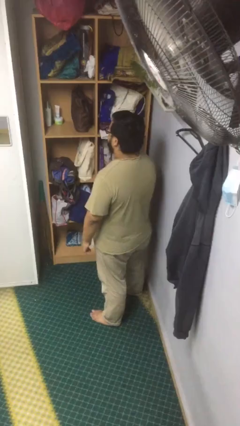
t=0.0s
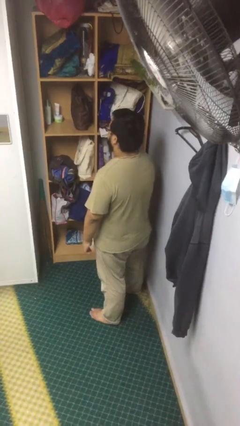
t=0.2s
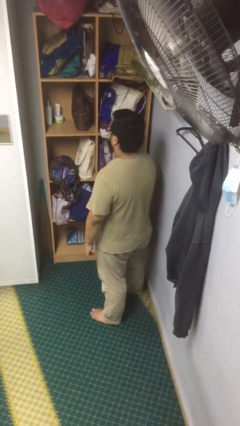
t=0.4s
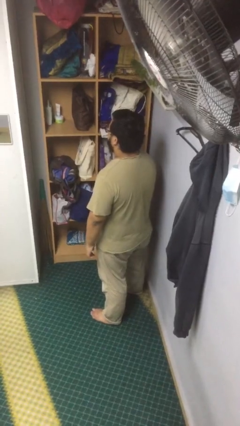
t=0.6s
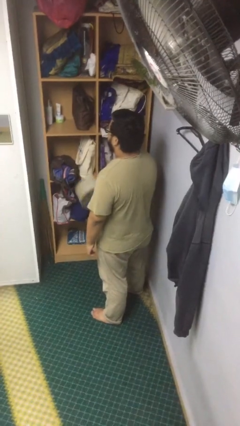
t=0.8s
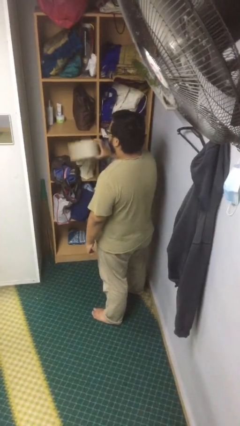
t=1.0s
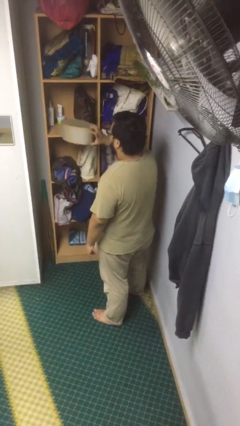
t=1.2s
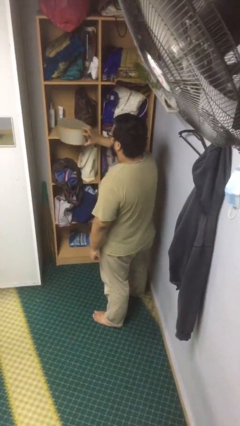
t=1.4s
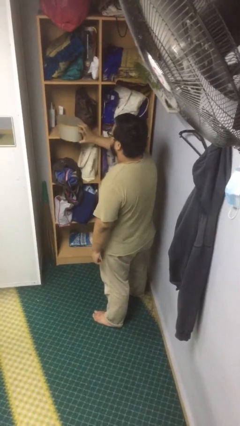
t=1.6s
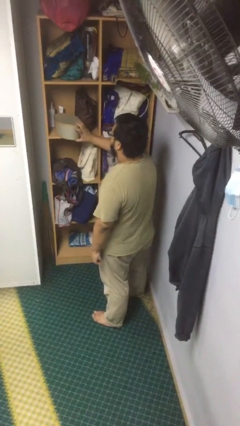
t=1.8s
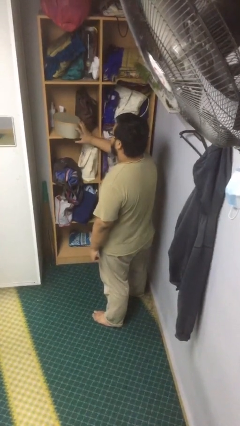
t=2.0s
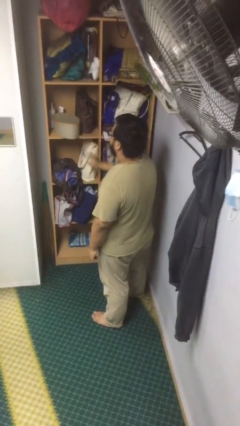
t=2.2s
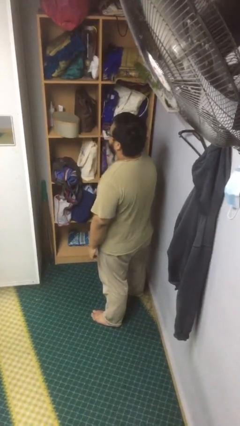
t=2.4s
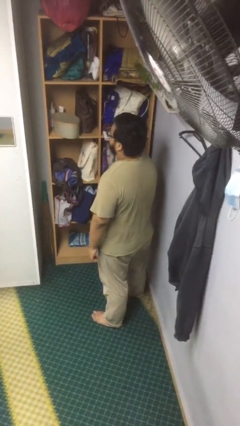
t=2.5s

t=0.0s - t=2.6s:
person puts down object into cabinet

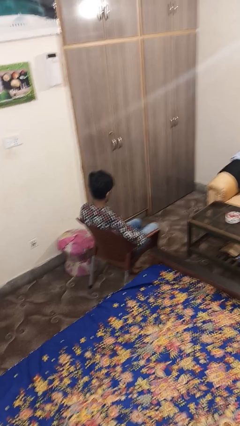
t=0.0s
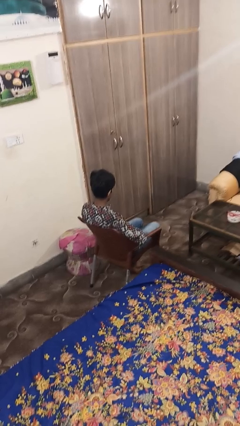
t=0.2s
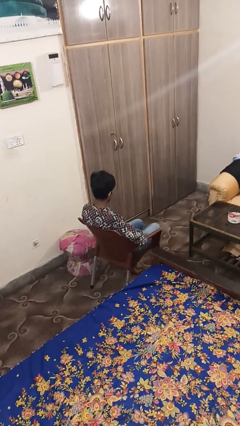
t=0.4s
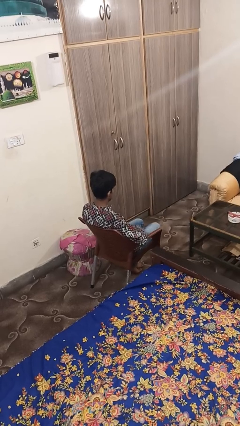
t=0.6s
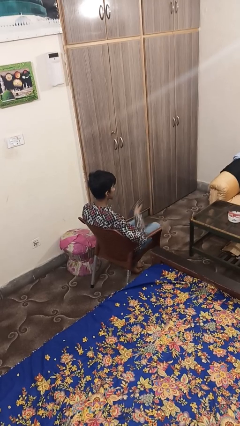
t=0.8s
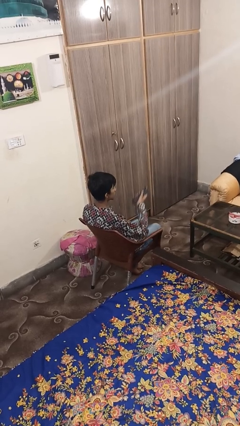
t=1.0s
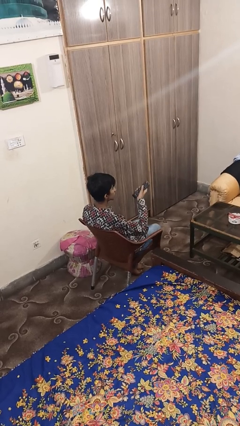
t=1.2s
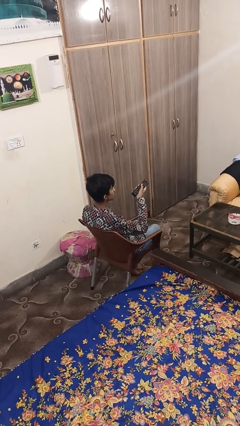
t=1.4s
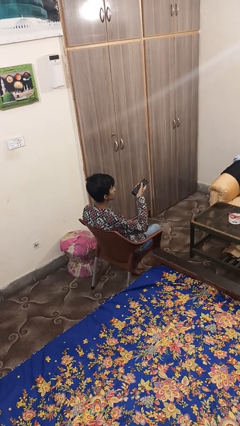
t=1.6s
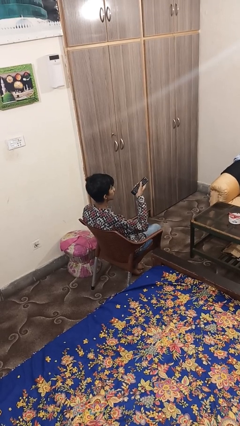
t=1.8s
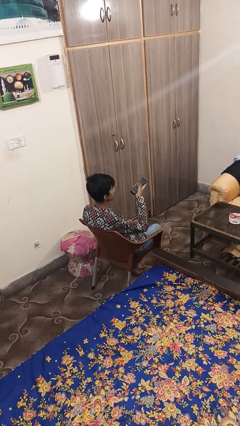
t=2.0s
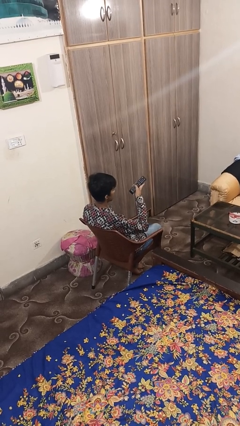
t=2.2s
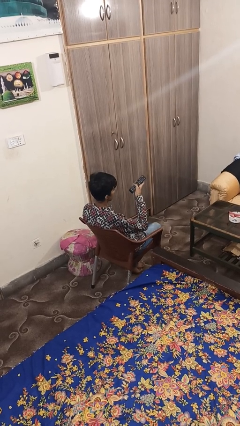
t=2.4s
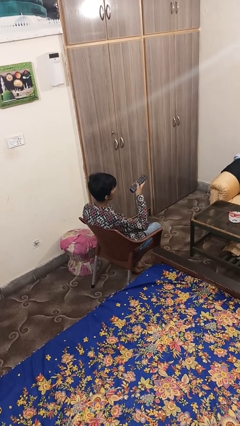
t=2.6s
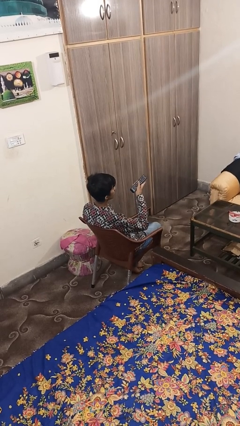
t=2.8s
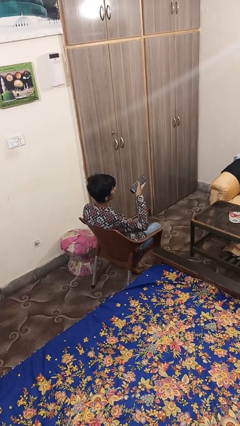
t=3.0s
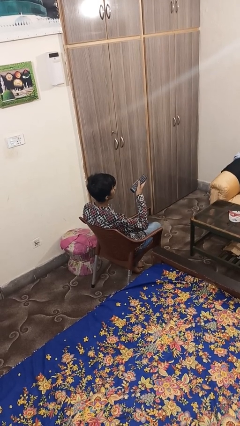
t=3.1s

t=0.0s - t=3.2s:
person uses television remote

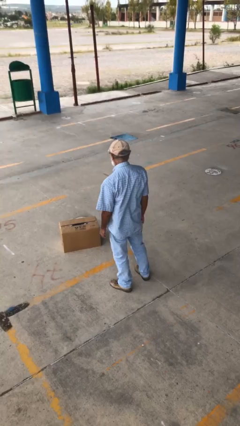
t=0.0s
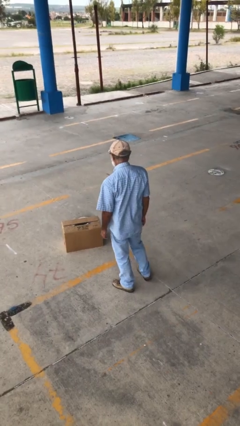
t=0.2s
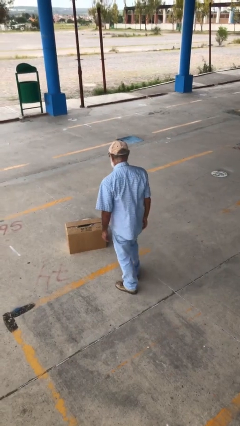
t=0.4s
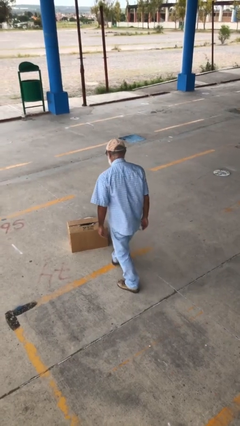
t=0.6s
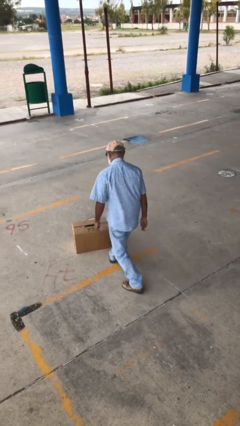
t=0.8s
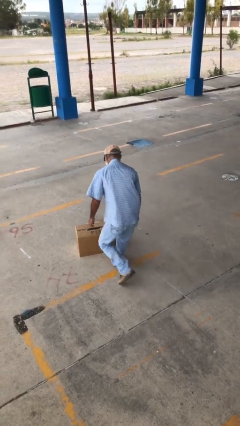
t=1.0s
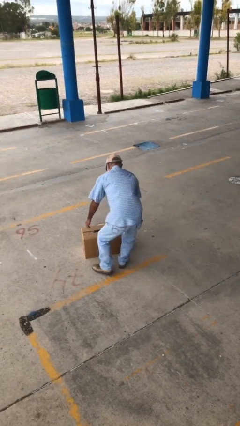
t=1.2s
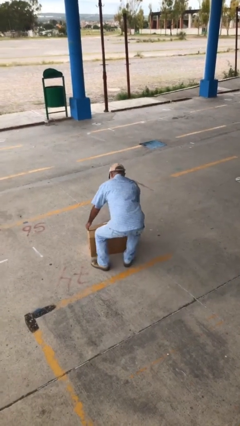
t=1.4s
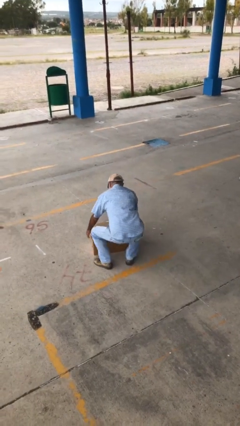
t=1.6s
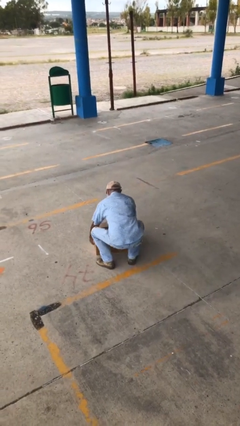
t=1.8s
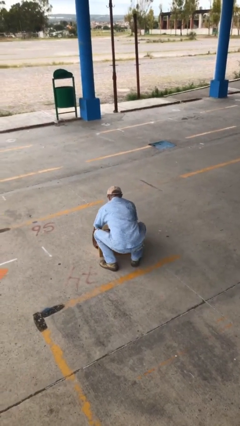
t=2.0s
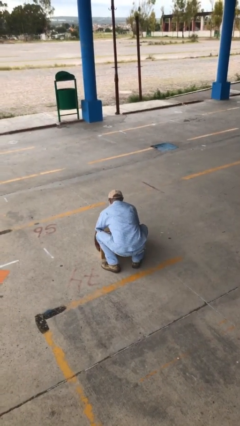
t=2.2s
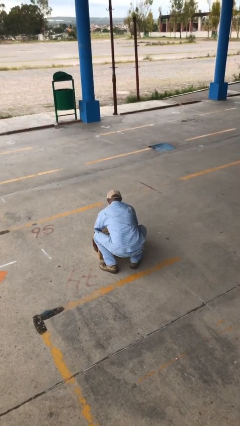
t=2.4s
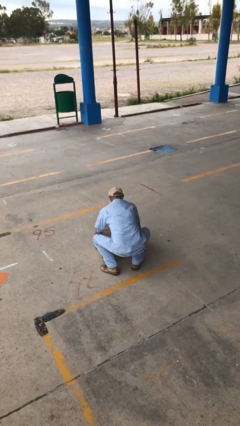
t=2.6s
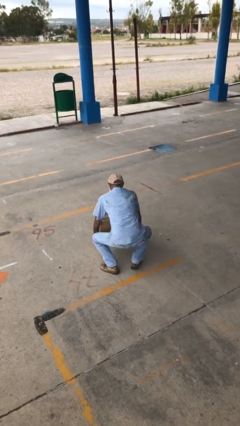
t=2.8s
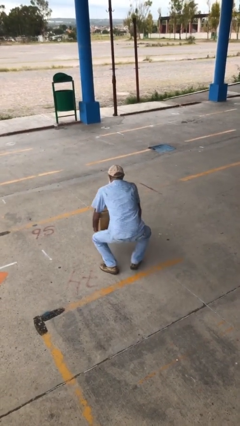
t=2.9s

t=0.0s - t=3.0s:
person picks up object from floor

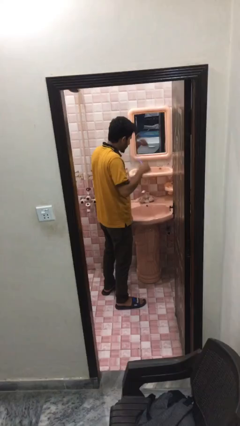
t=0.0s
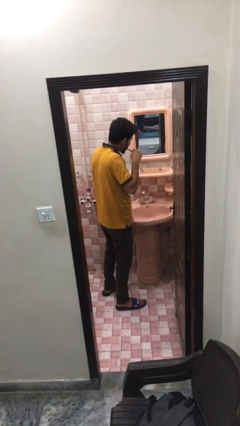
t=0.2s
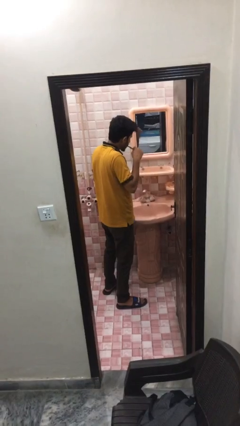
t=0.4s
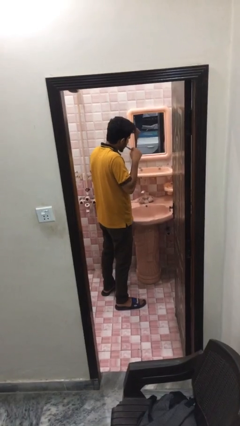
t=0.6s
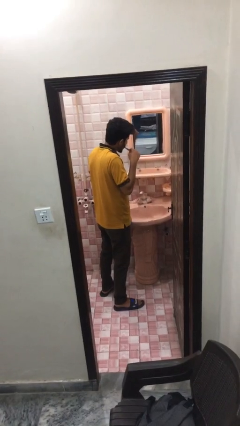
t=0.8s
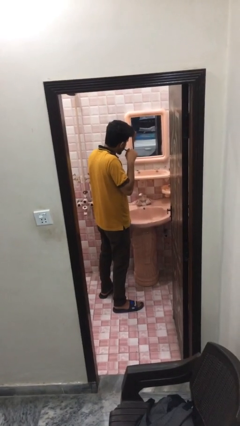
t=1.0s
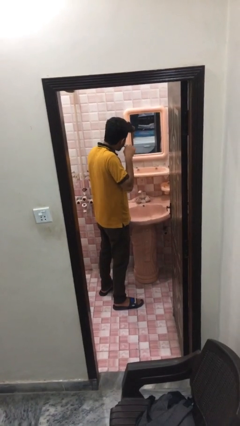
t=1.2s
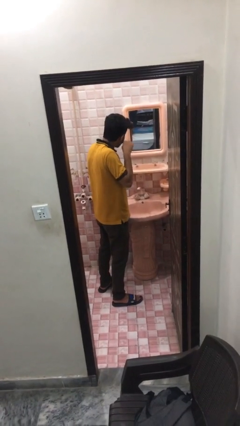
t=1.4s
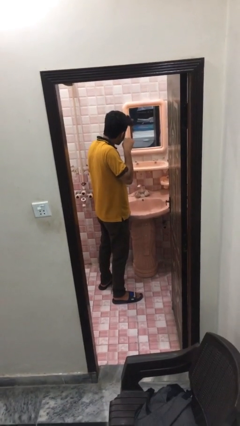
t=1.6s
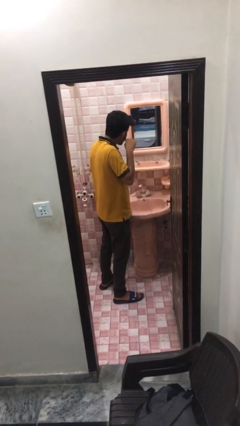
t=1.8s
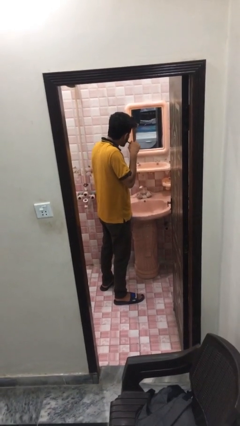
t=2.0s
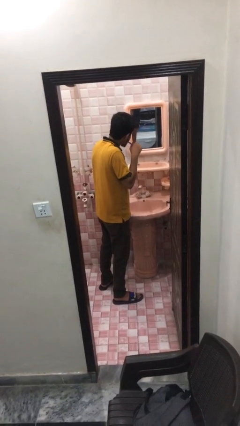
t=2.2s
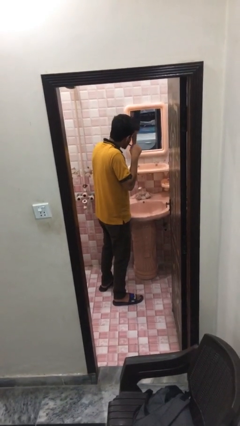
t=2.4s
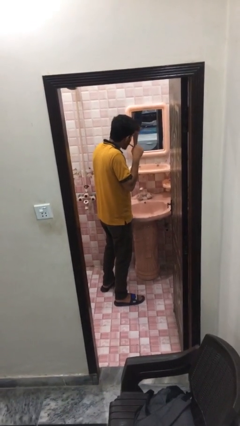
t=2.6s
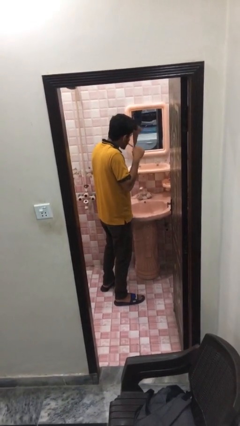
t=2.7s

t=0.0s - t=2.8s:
person brushes teeth

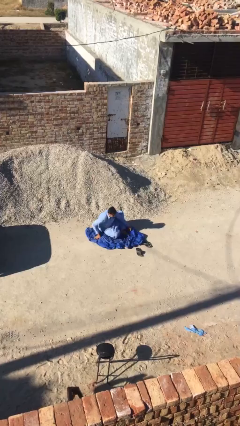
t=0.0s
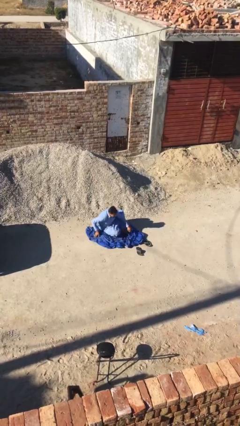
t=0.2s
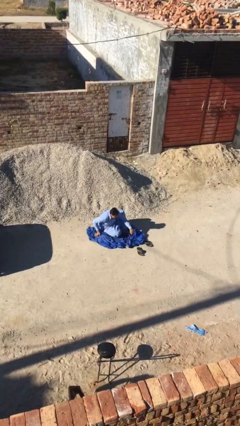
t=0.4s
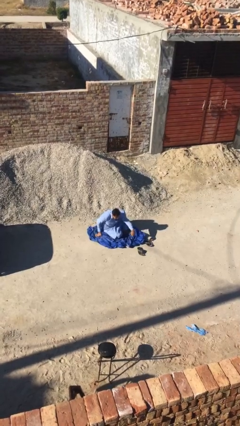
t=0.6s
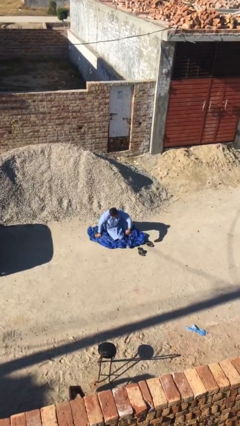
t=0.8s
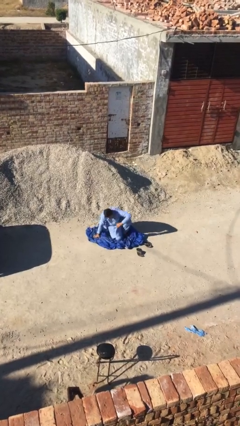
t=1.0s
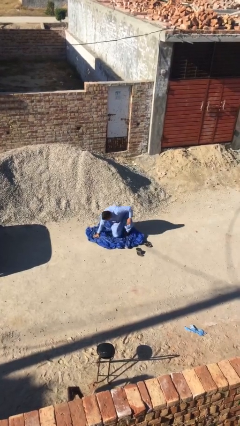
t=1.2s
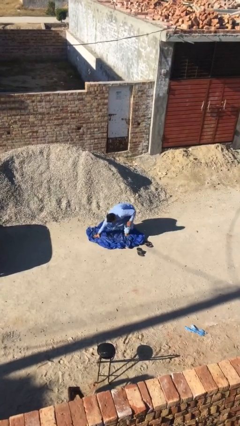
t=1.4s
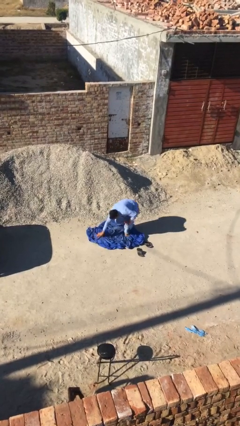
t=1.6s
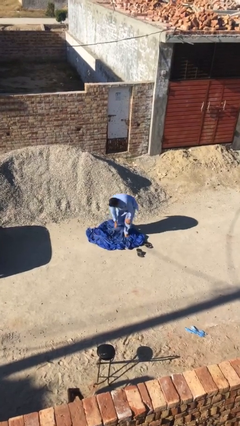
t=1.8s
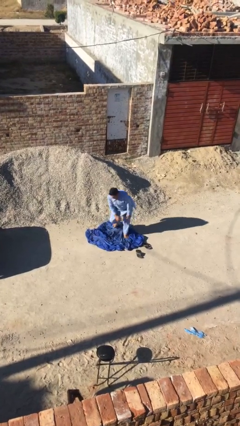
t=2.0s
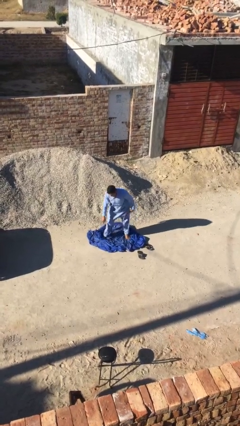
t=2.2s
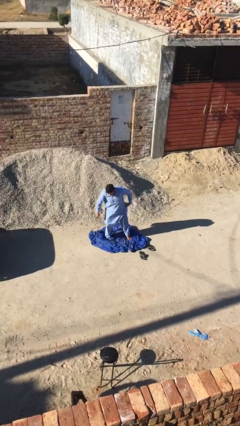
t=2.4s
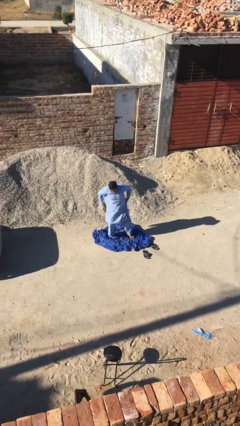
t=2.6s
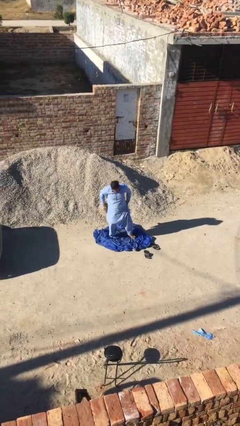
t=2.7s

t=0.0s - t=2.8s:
person stands up

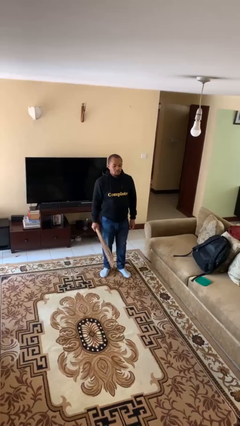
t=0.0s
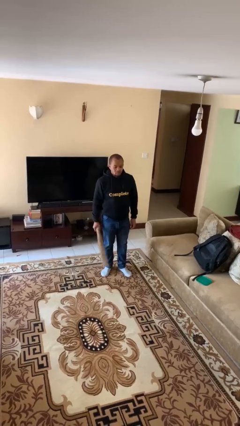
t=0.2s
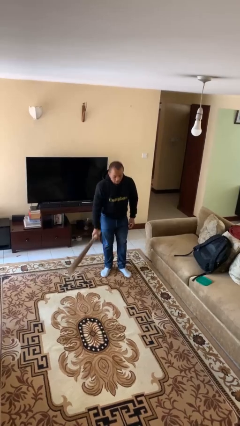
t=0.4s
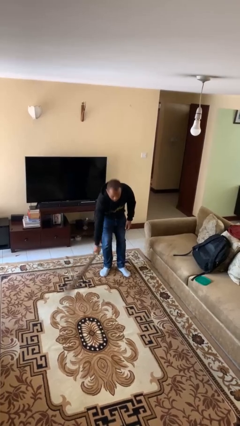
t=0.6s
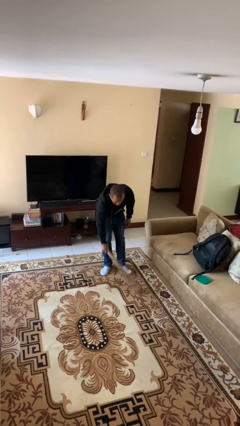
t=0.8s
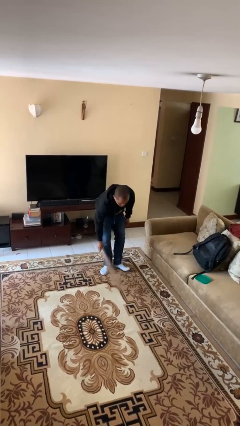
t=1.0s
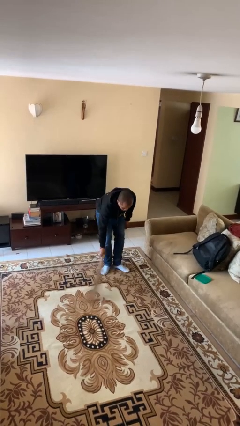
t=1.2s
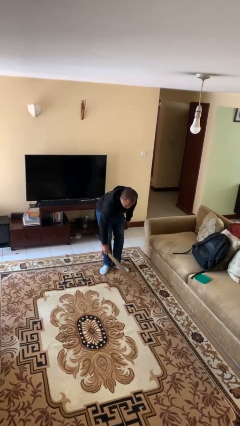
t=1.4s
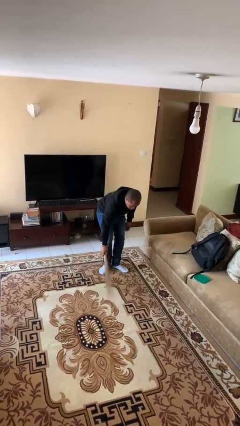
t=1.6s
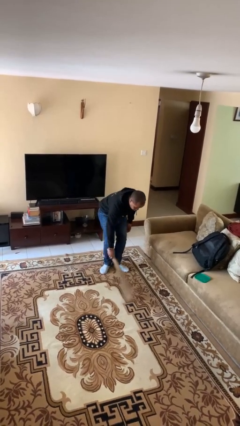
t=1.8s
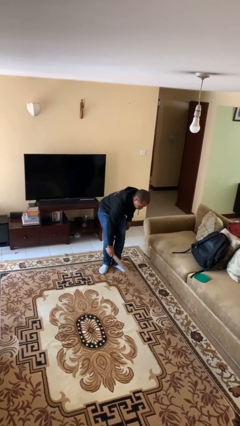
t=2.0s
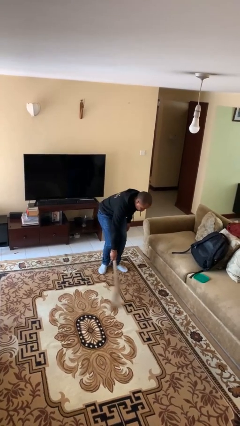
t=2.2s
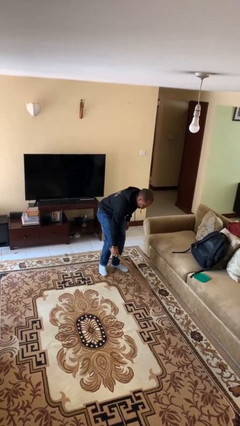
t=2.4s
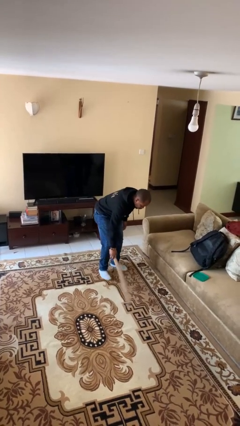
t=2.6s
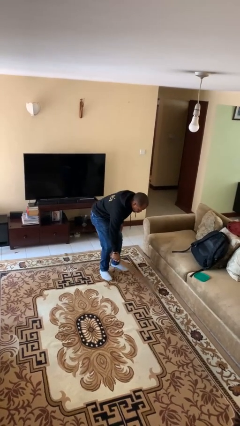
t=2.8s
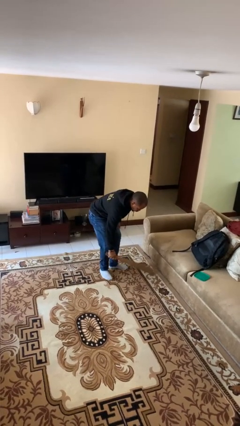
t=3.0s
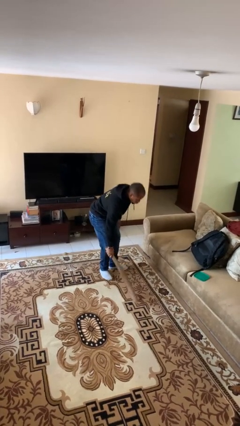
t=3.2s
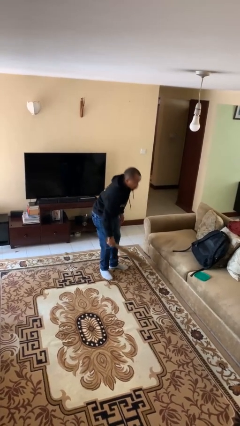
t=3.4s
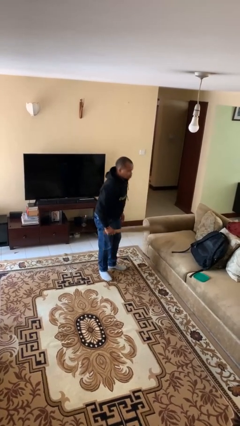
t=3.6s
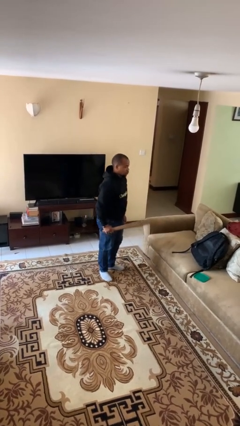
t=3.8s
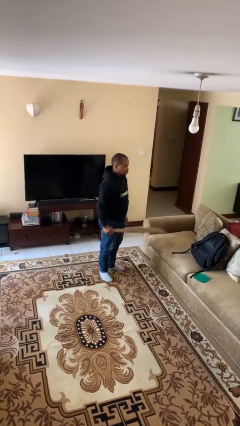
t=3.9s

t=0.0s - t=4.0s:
person sweeps floor
